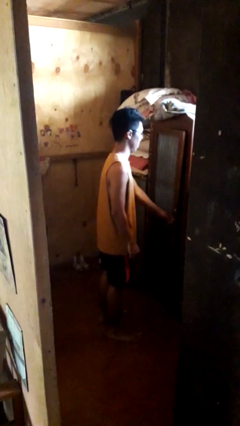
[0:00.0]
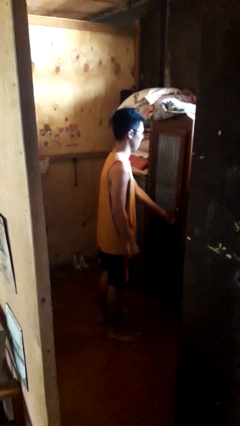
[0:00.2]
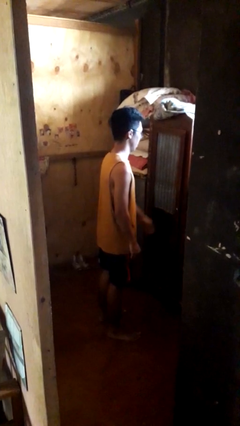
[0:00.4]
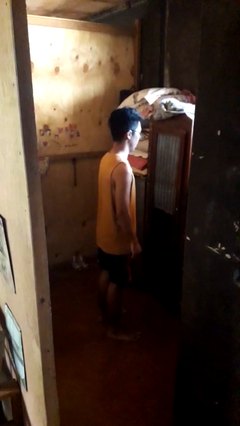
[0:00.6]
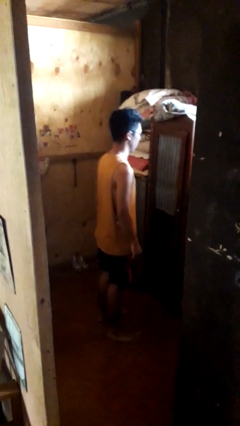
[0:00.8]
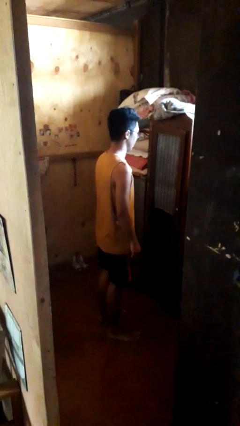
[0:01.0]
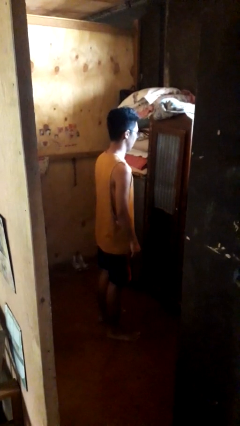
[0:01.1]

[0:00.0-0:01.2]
person closes closet door

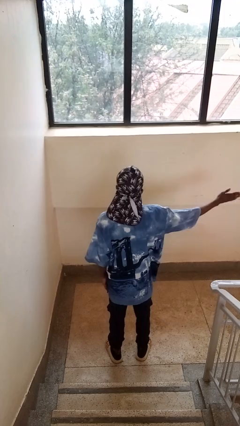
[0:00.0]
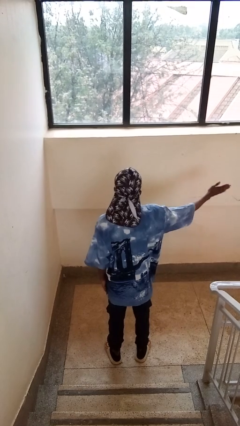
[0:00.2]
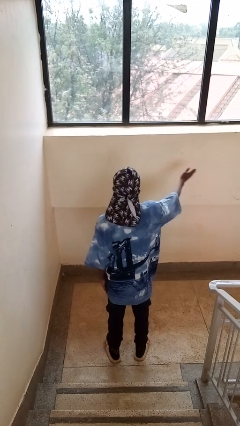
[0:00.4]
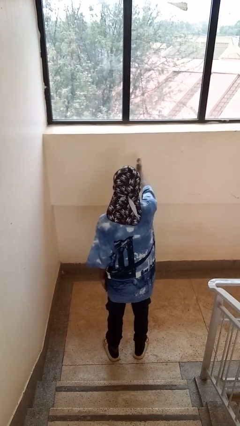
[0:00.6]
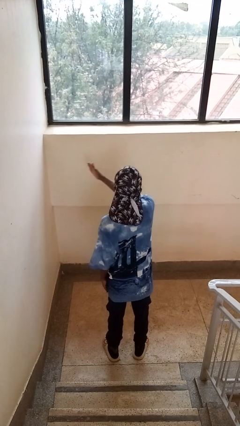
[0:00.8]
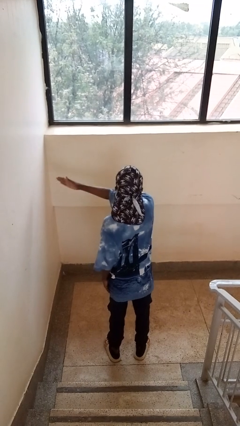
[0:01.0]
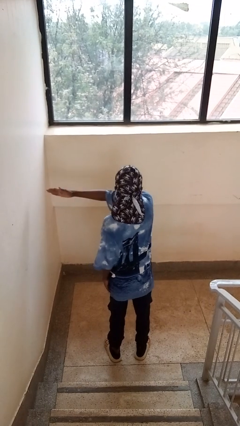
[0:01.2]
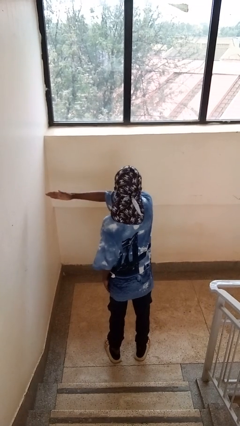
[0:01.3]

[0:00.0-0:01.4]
person gestures swipe left

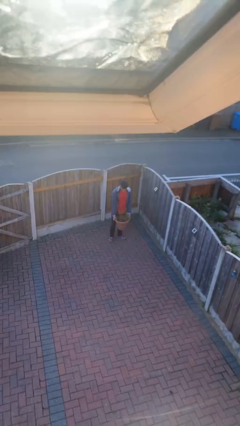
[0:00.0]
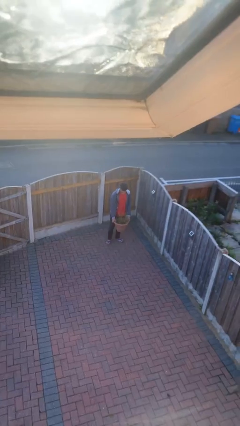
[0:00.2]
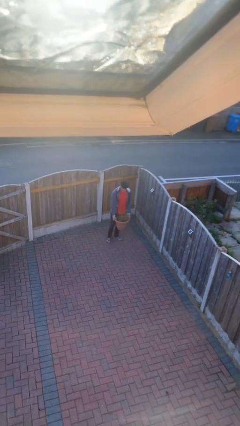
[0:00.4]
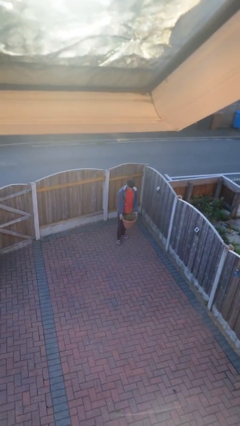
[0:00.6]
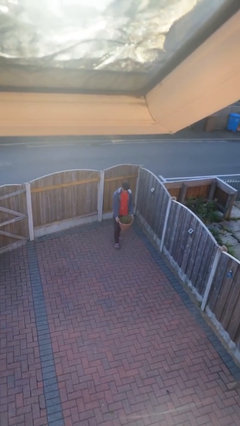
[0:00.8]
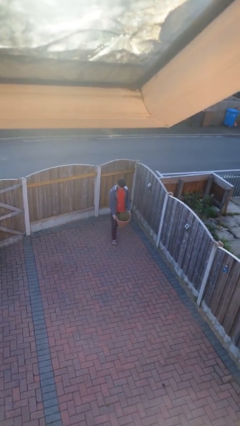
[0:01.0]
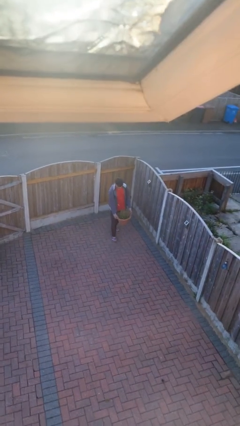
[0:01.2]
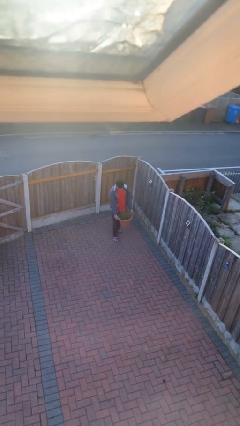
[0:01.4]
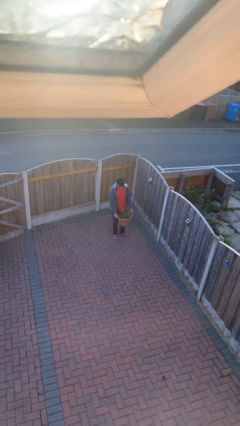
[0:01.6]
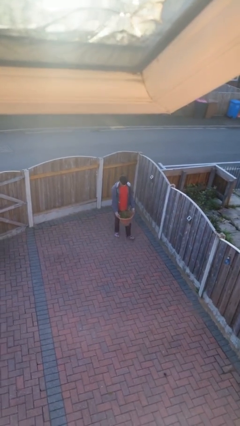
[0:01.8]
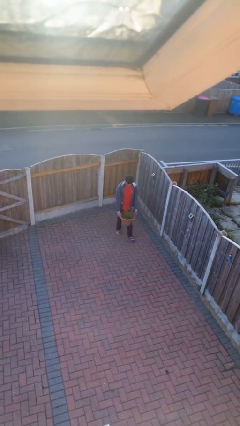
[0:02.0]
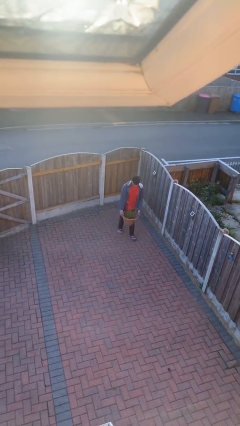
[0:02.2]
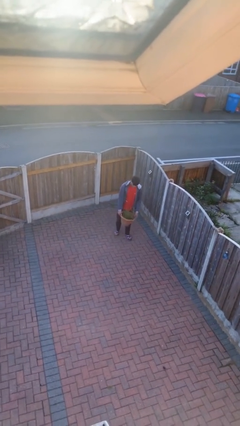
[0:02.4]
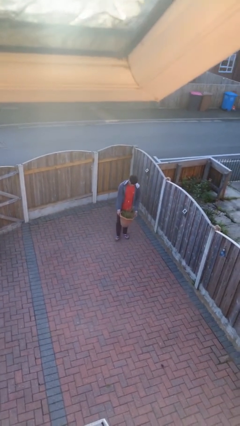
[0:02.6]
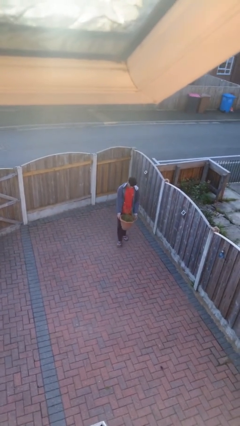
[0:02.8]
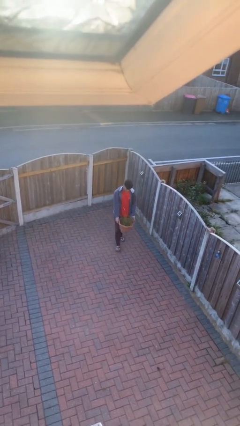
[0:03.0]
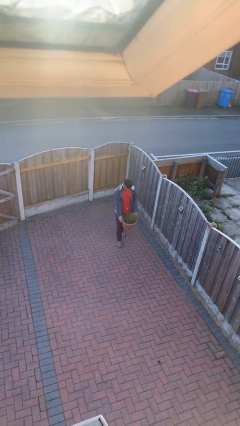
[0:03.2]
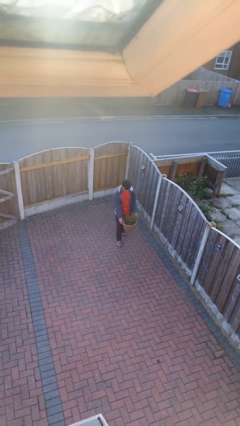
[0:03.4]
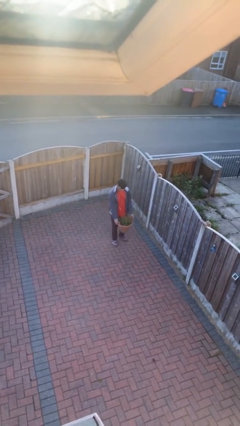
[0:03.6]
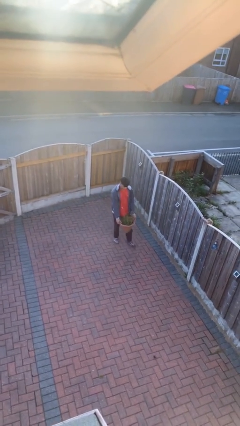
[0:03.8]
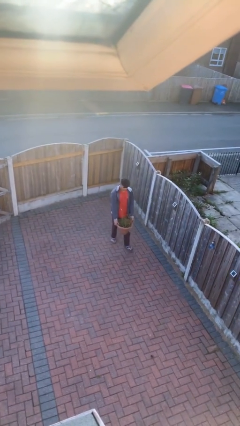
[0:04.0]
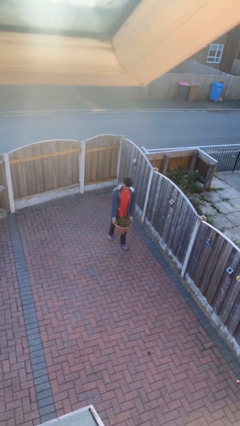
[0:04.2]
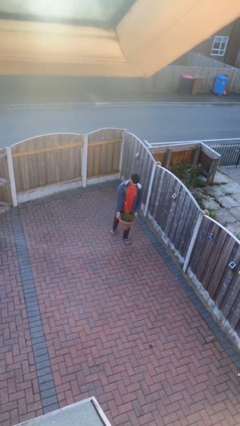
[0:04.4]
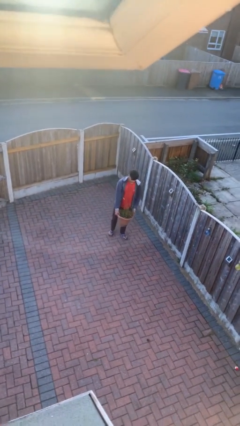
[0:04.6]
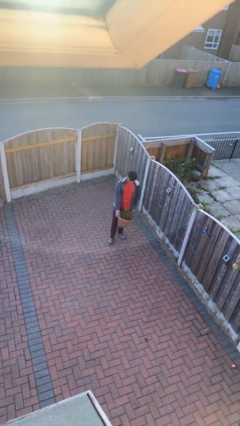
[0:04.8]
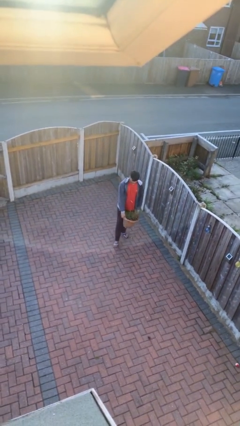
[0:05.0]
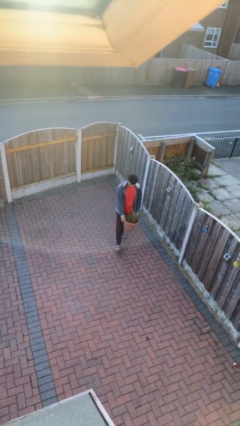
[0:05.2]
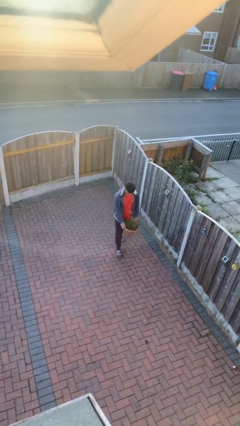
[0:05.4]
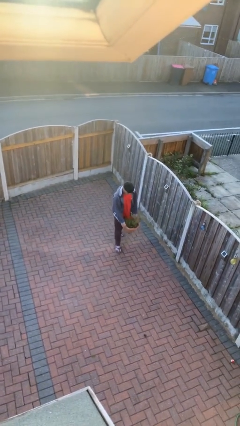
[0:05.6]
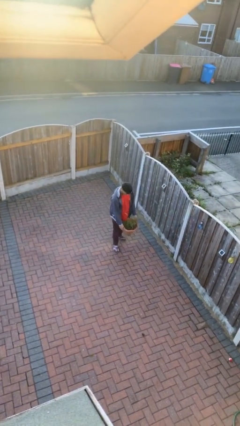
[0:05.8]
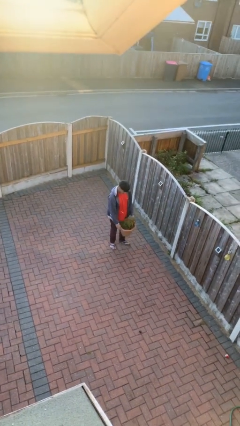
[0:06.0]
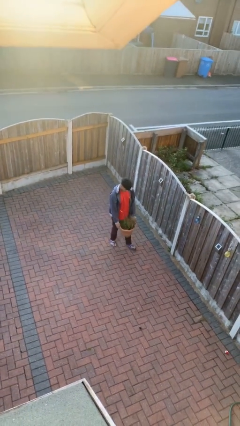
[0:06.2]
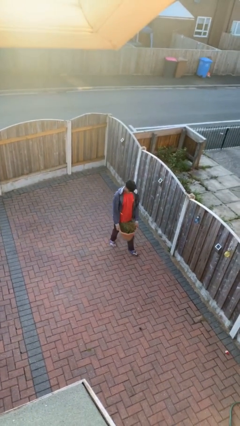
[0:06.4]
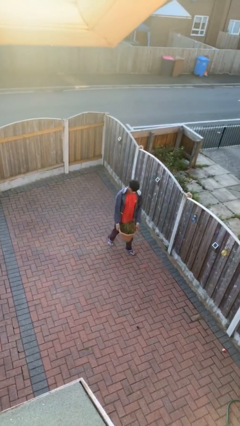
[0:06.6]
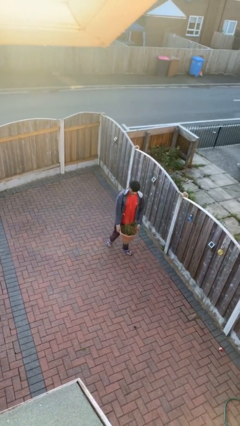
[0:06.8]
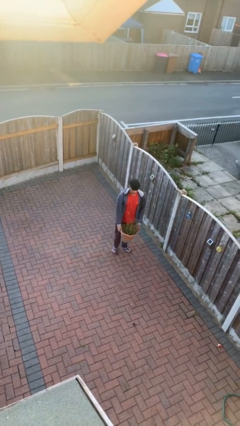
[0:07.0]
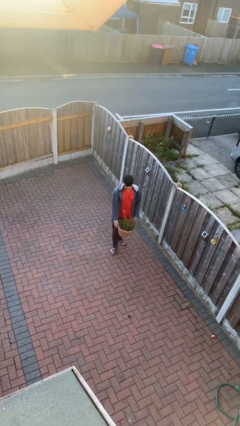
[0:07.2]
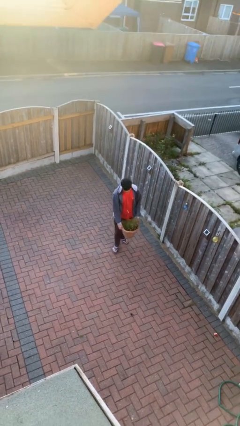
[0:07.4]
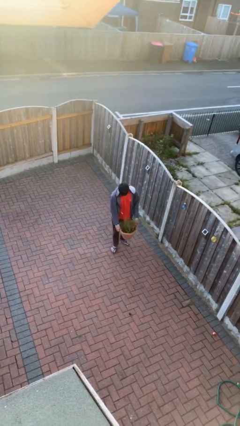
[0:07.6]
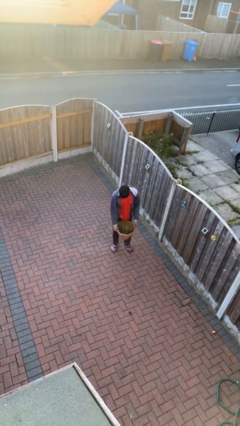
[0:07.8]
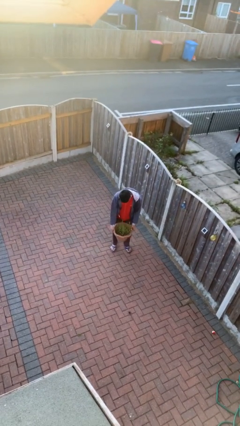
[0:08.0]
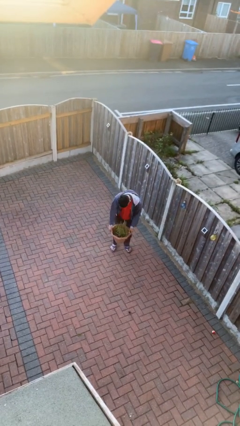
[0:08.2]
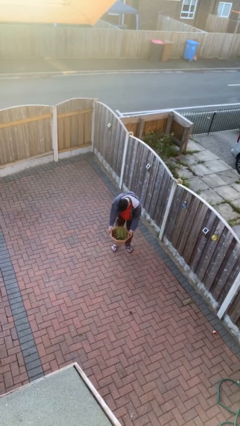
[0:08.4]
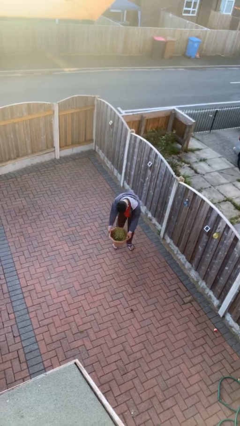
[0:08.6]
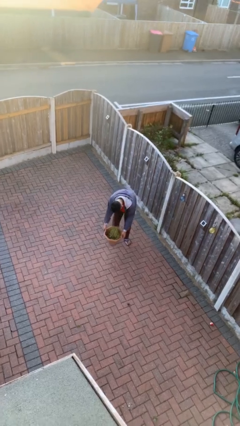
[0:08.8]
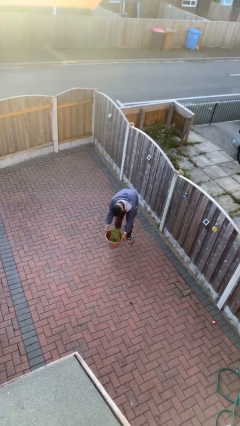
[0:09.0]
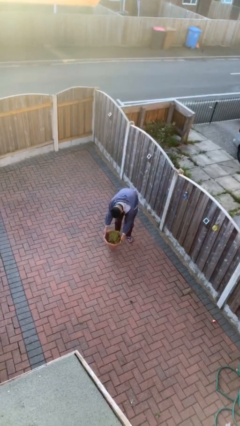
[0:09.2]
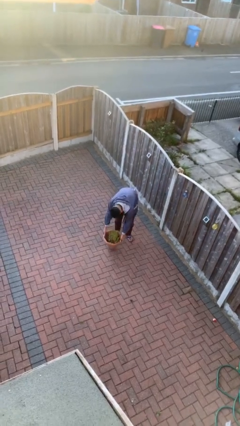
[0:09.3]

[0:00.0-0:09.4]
person carries heavy object

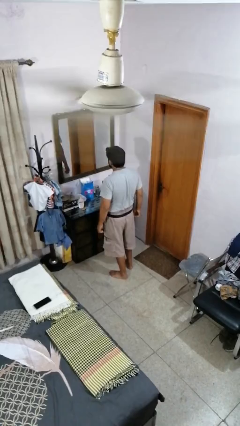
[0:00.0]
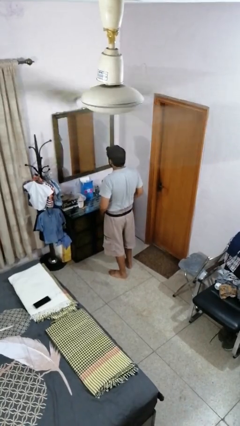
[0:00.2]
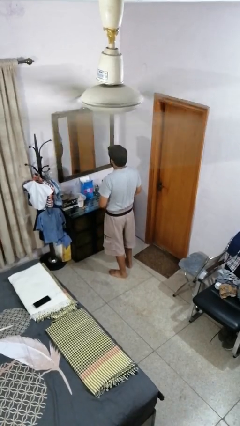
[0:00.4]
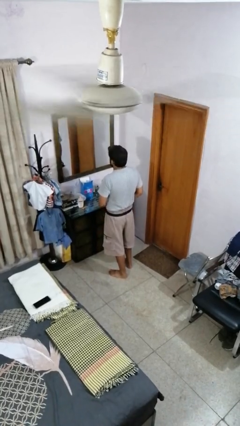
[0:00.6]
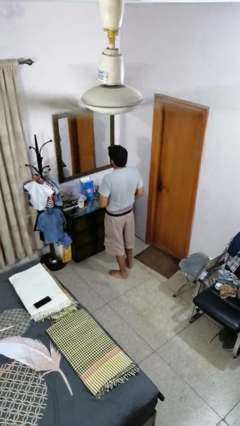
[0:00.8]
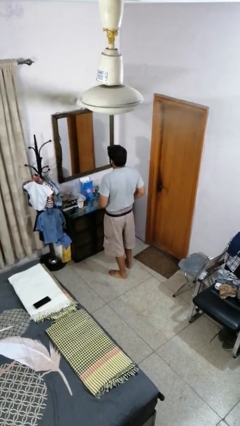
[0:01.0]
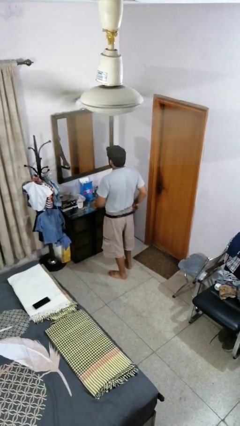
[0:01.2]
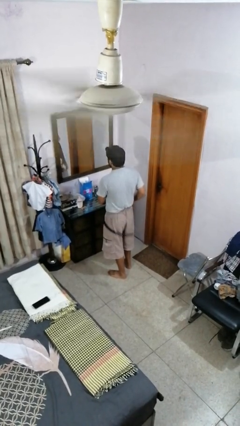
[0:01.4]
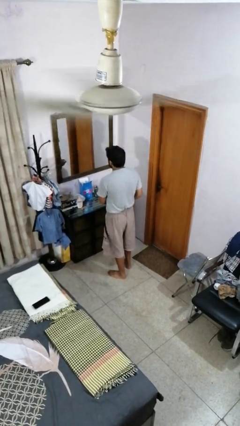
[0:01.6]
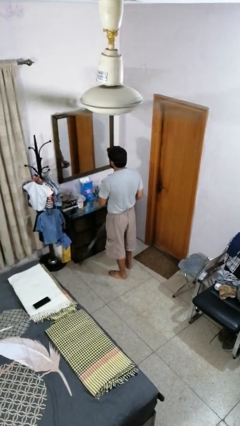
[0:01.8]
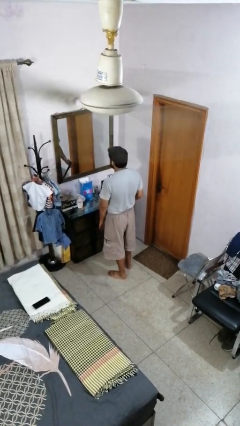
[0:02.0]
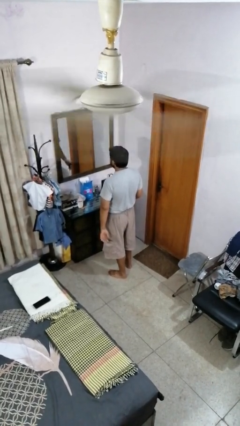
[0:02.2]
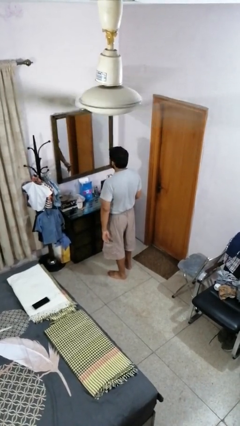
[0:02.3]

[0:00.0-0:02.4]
person takes off belt

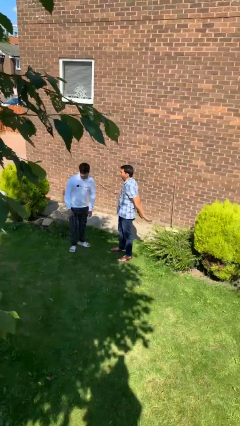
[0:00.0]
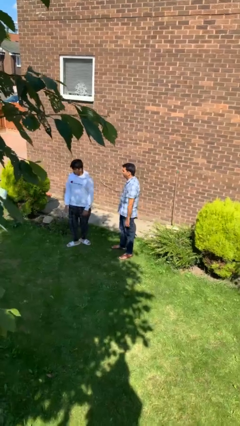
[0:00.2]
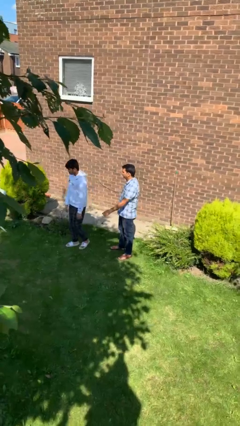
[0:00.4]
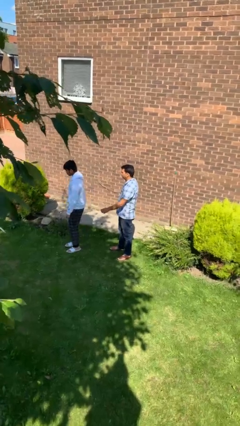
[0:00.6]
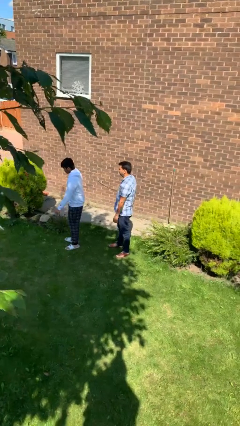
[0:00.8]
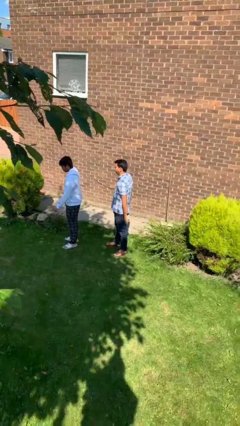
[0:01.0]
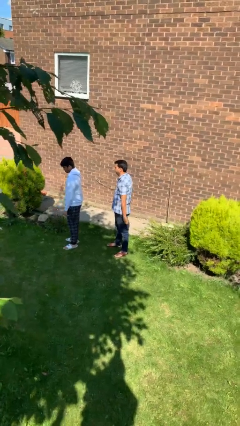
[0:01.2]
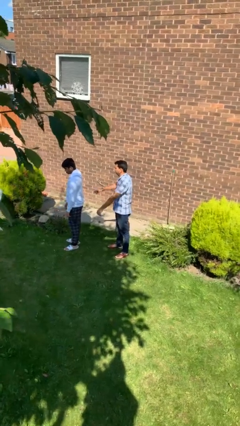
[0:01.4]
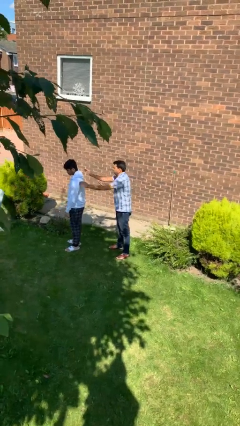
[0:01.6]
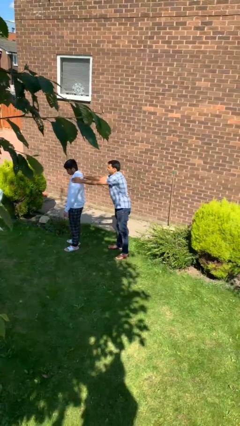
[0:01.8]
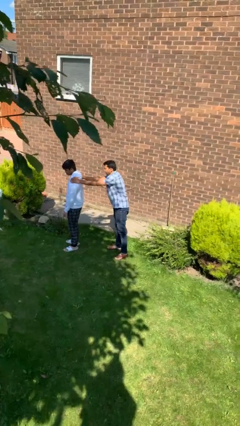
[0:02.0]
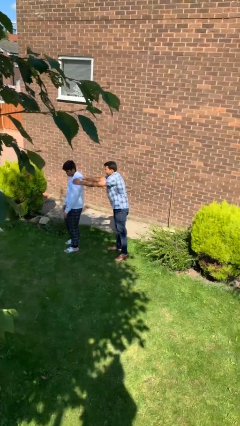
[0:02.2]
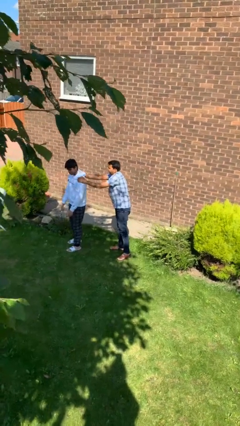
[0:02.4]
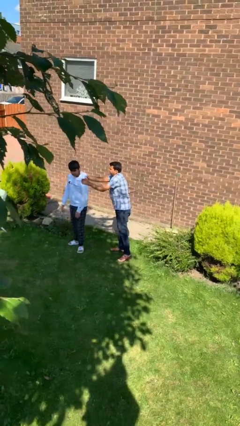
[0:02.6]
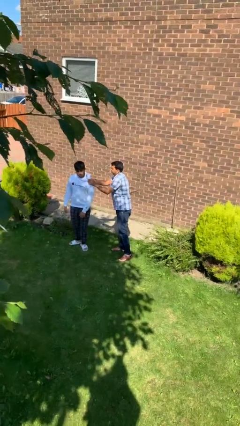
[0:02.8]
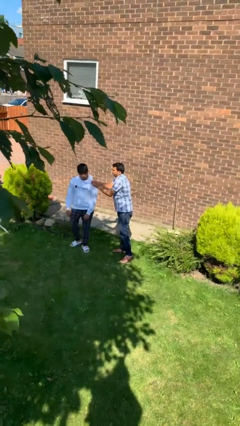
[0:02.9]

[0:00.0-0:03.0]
person grabs person by shoulder
